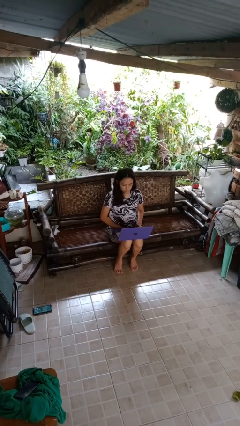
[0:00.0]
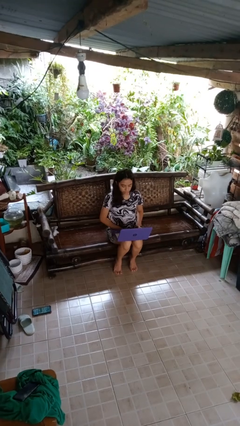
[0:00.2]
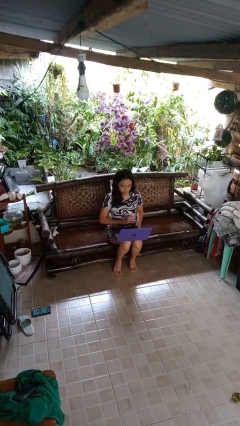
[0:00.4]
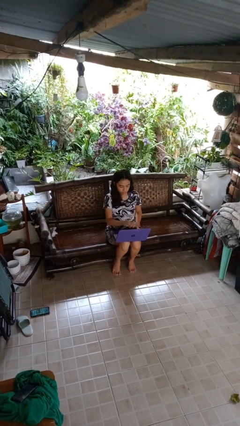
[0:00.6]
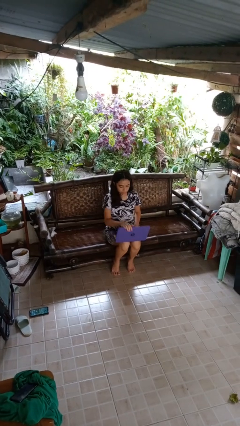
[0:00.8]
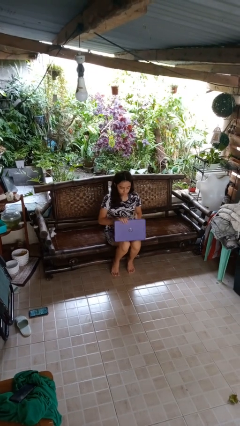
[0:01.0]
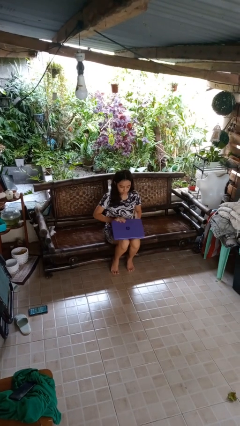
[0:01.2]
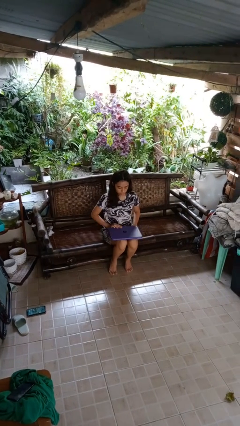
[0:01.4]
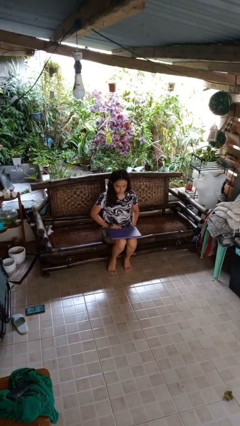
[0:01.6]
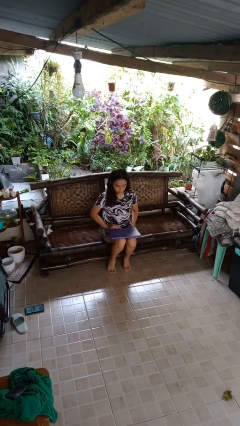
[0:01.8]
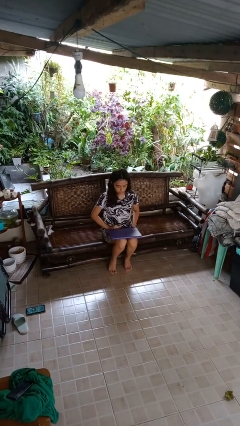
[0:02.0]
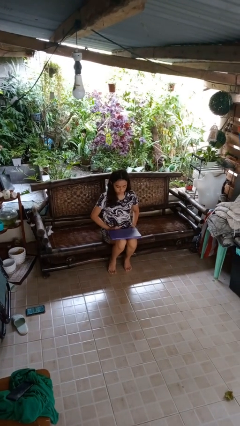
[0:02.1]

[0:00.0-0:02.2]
person closes laptop

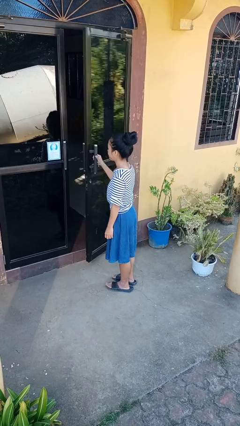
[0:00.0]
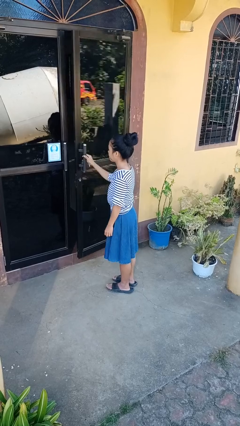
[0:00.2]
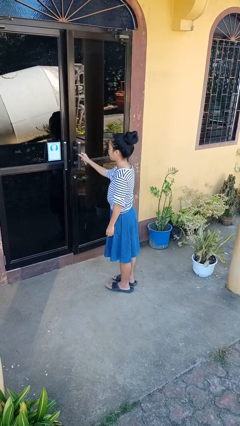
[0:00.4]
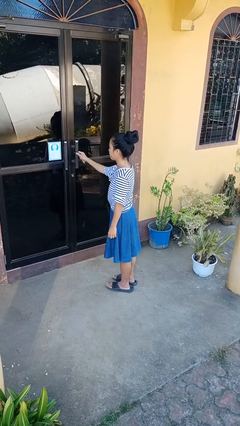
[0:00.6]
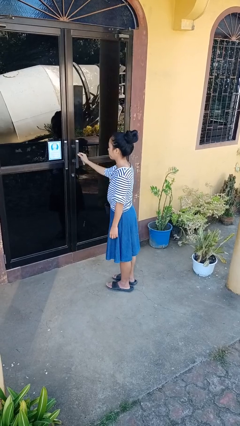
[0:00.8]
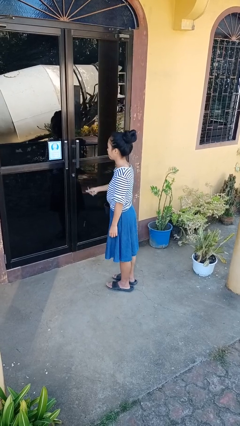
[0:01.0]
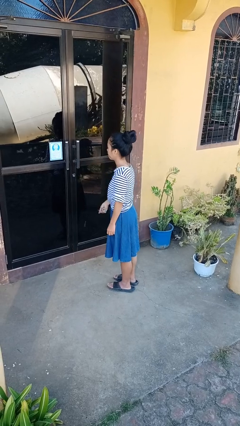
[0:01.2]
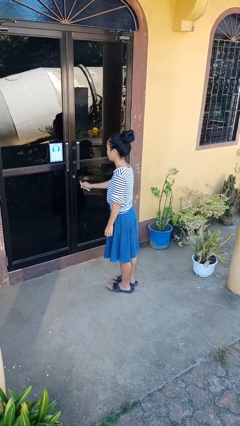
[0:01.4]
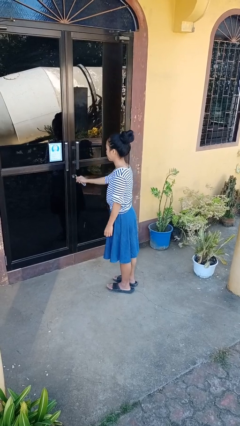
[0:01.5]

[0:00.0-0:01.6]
person closes facility door

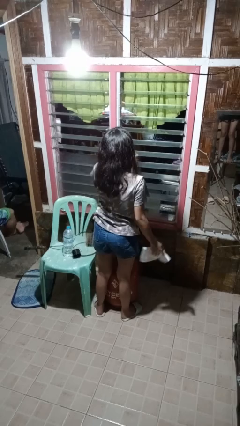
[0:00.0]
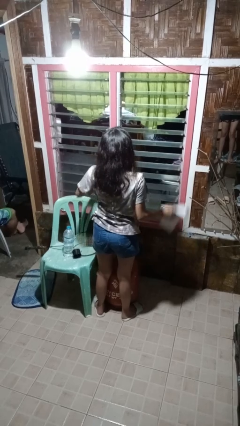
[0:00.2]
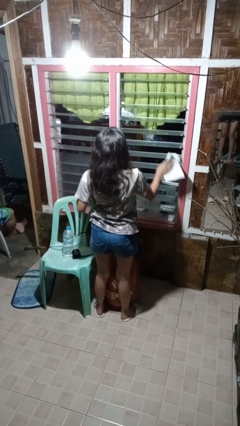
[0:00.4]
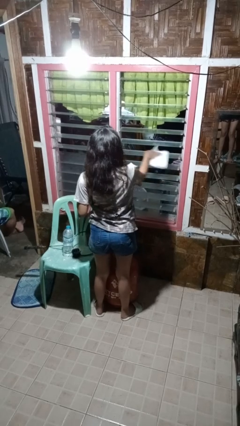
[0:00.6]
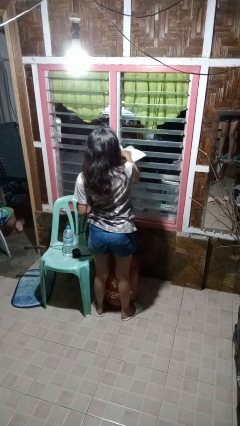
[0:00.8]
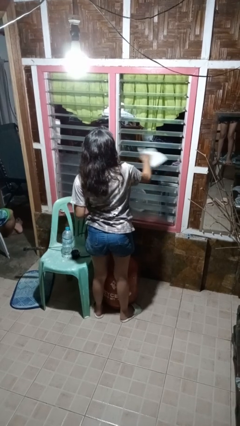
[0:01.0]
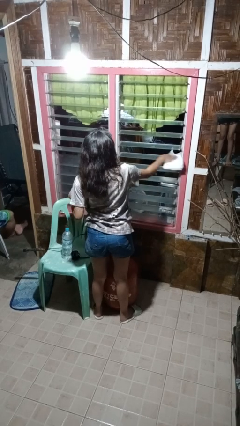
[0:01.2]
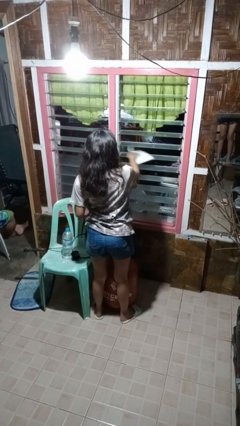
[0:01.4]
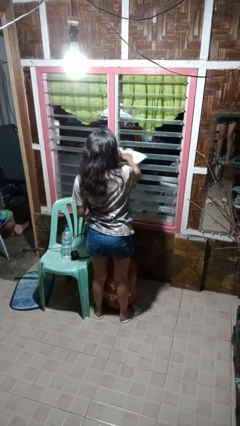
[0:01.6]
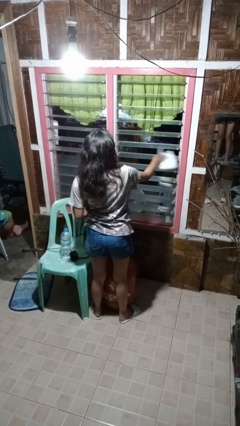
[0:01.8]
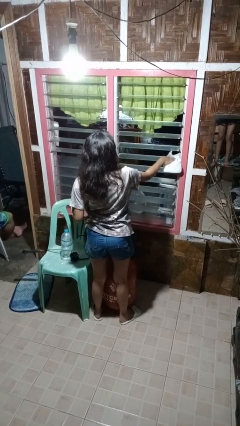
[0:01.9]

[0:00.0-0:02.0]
person washes window

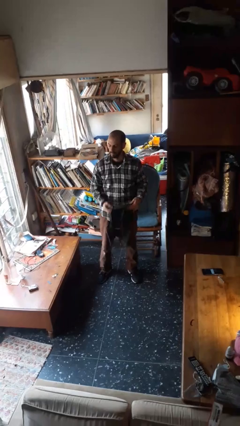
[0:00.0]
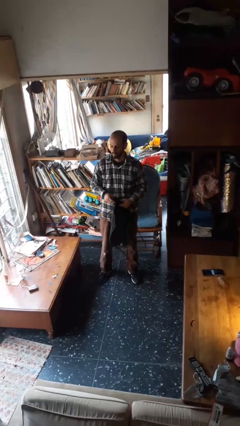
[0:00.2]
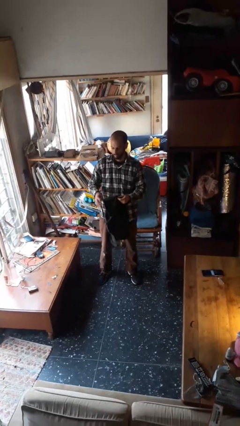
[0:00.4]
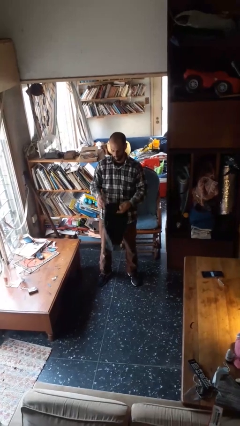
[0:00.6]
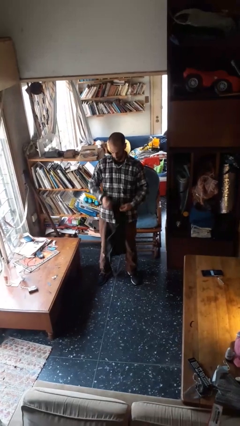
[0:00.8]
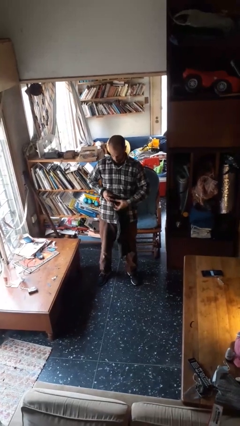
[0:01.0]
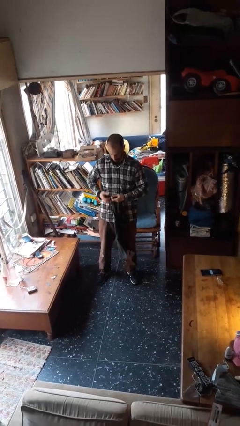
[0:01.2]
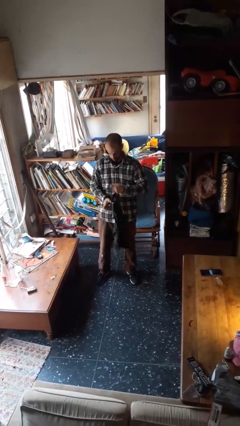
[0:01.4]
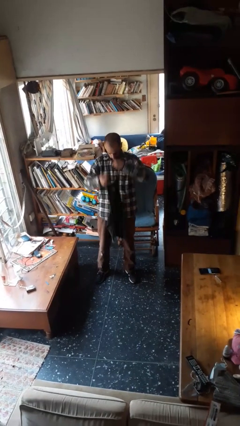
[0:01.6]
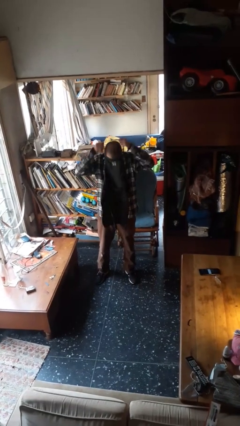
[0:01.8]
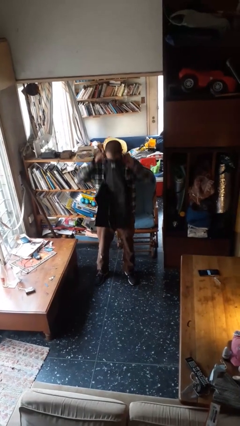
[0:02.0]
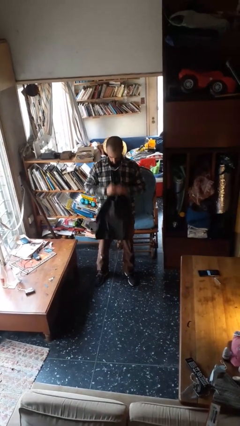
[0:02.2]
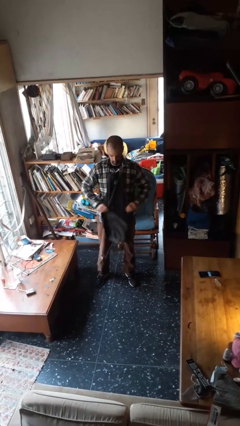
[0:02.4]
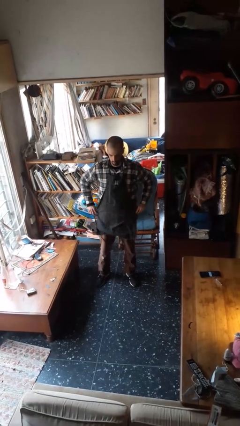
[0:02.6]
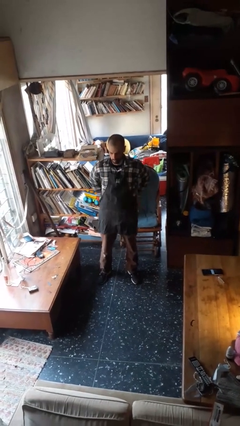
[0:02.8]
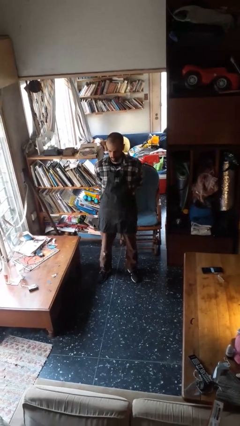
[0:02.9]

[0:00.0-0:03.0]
person puts on apron

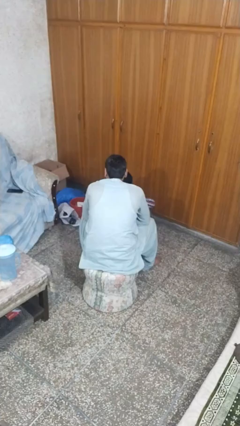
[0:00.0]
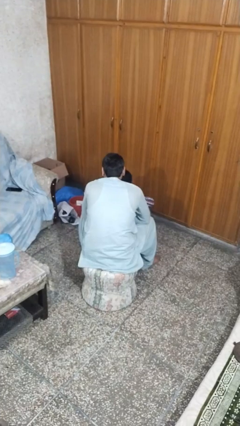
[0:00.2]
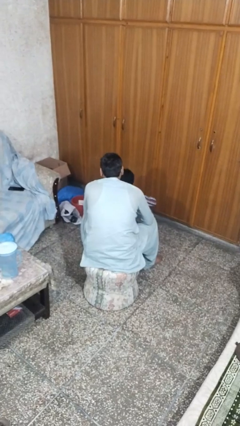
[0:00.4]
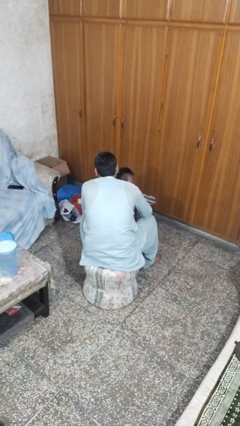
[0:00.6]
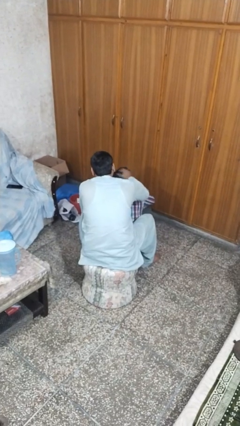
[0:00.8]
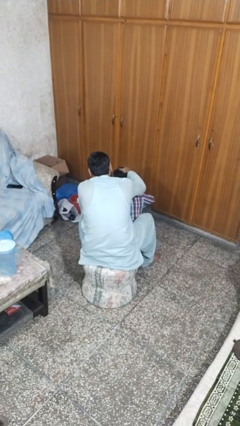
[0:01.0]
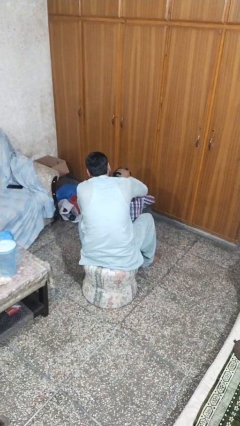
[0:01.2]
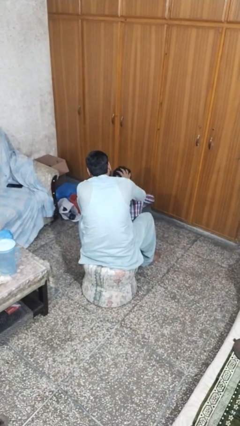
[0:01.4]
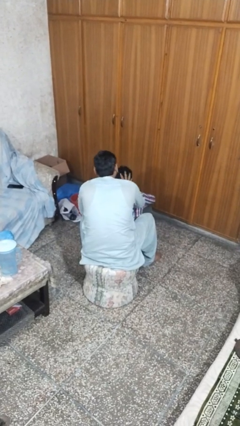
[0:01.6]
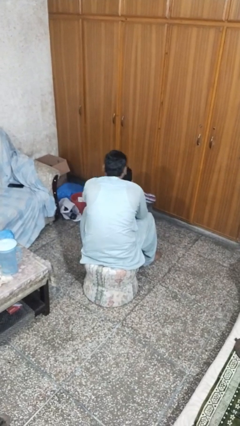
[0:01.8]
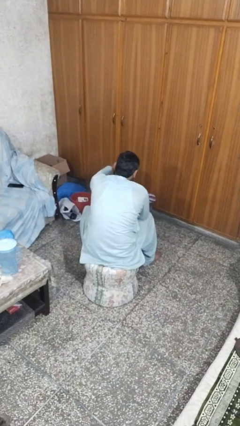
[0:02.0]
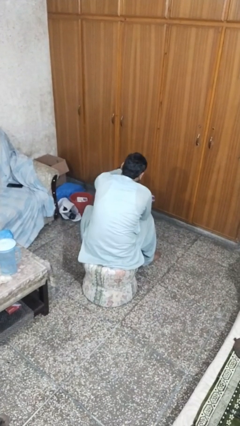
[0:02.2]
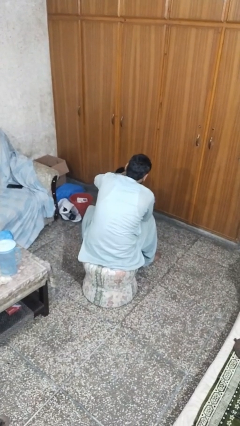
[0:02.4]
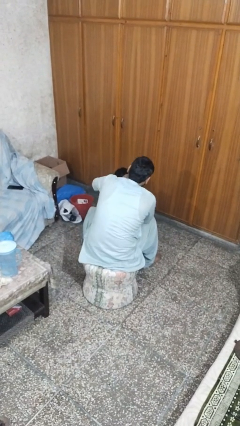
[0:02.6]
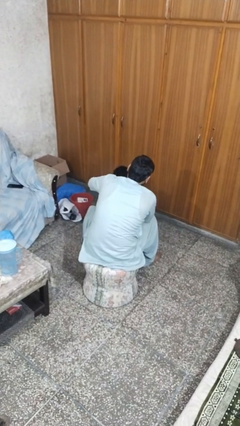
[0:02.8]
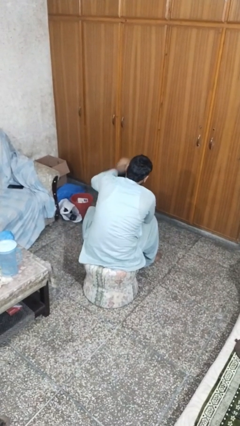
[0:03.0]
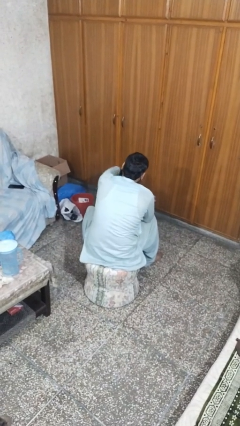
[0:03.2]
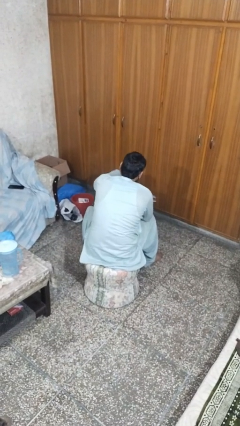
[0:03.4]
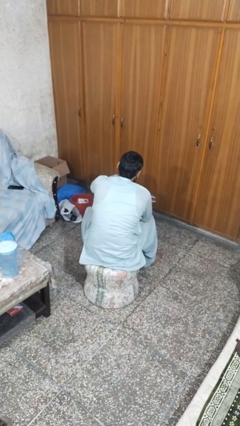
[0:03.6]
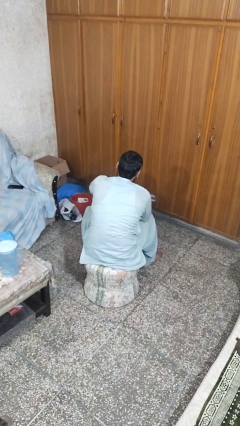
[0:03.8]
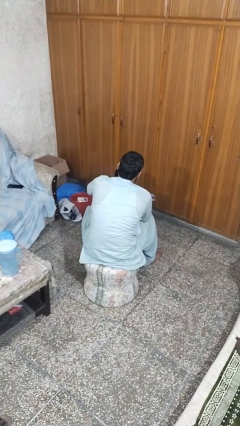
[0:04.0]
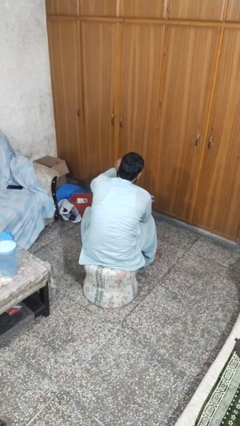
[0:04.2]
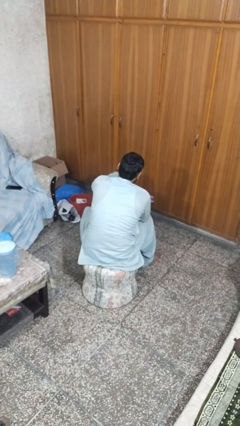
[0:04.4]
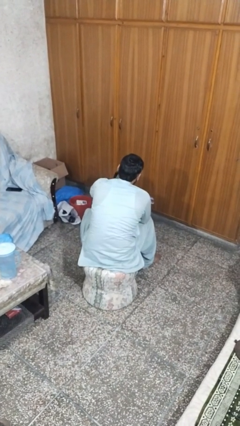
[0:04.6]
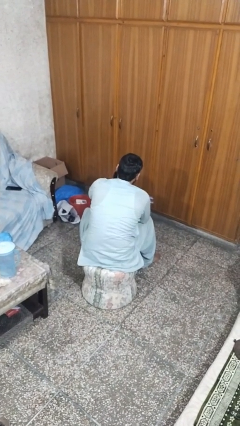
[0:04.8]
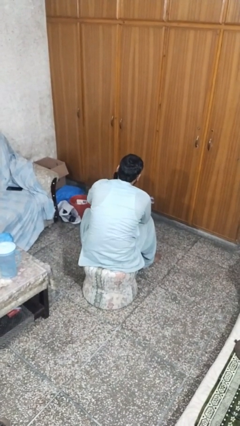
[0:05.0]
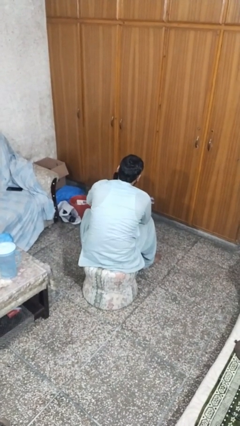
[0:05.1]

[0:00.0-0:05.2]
person braids hair of person

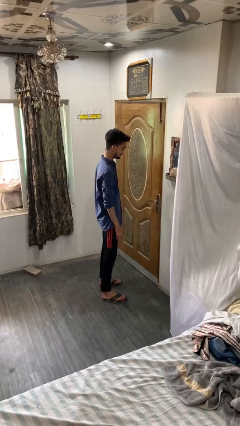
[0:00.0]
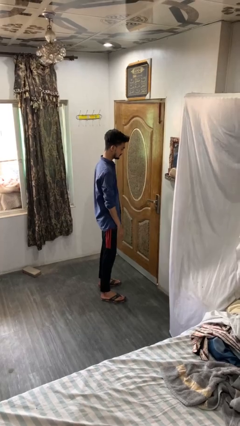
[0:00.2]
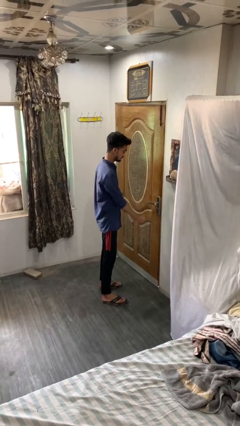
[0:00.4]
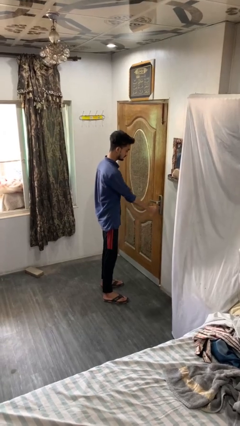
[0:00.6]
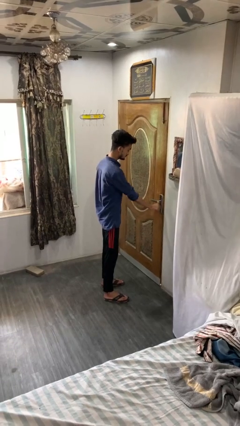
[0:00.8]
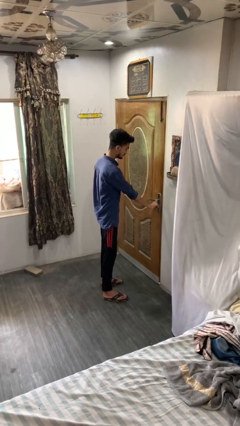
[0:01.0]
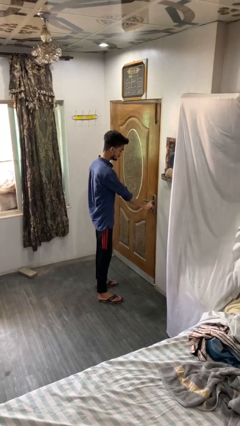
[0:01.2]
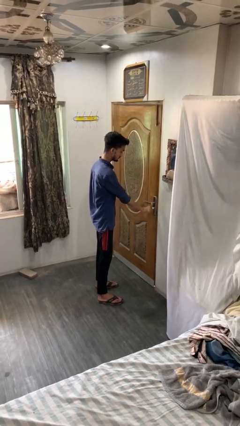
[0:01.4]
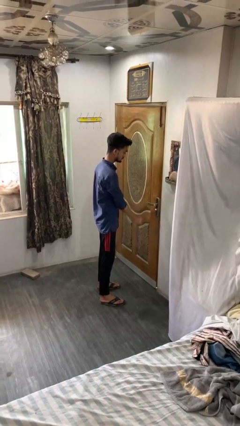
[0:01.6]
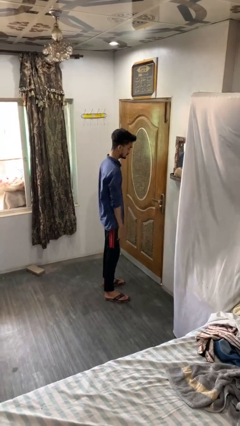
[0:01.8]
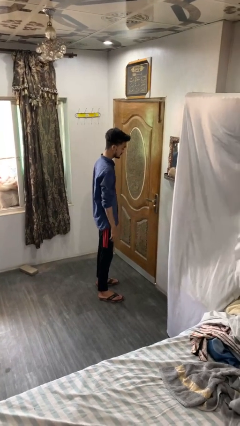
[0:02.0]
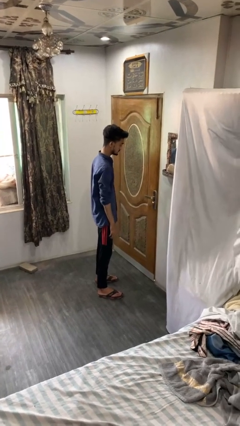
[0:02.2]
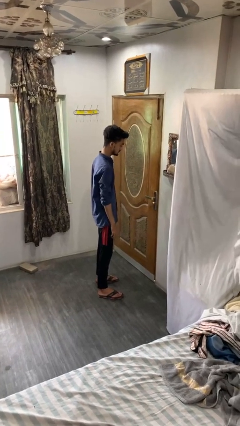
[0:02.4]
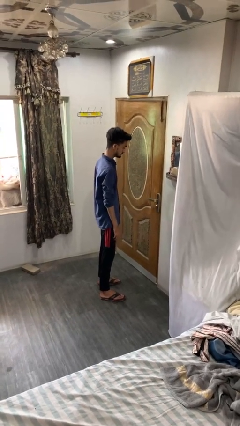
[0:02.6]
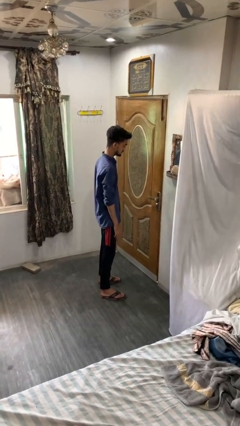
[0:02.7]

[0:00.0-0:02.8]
person unlocks door with keys

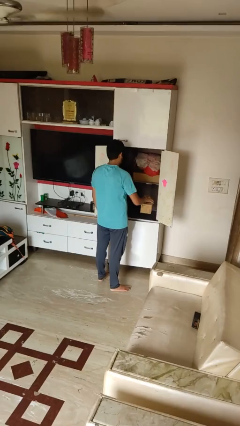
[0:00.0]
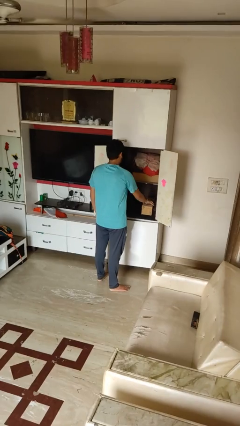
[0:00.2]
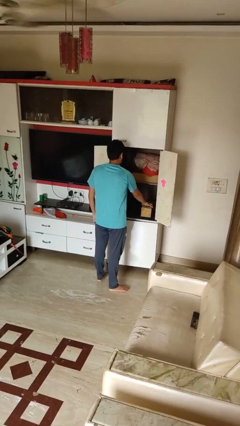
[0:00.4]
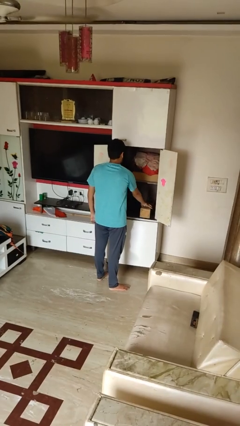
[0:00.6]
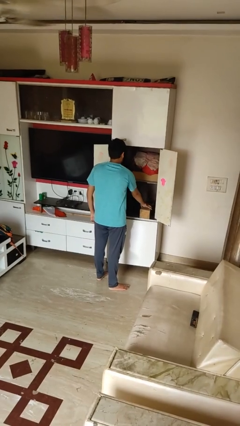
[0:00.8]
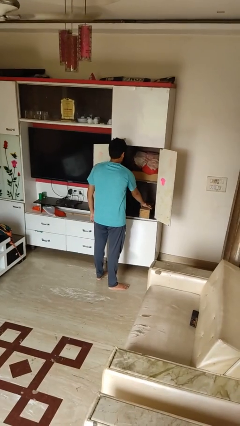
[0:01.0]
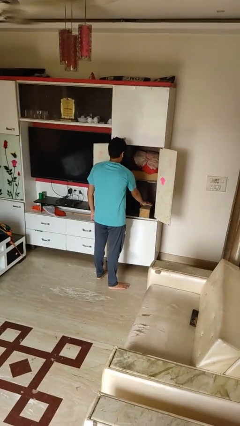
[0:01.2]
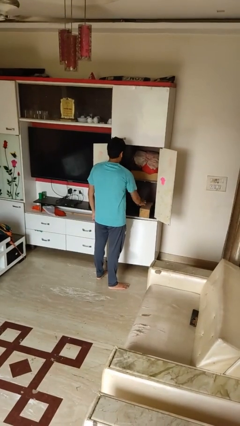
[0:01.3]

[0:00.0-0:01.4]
person puts down object into cabinet
